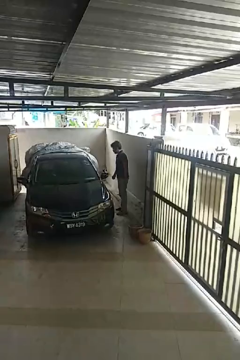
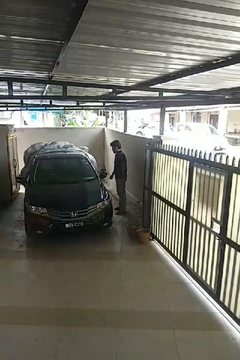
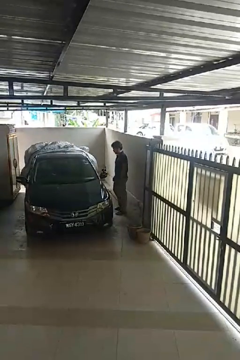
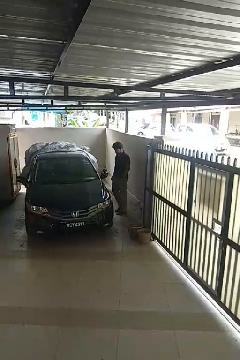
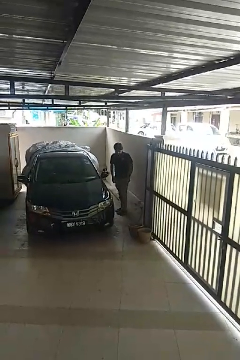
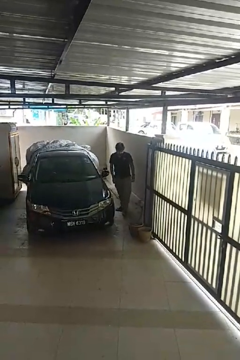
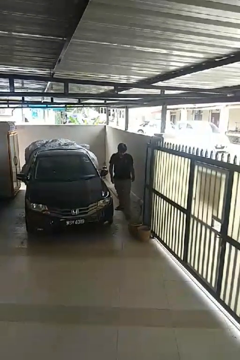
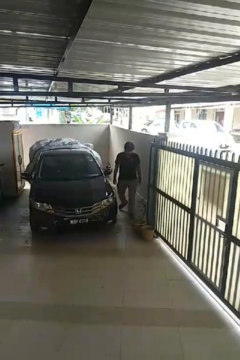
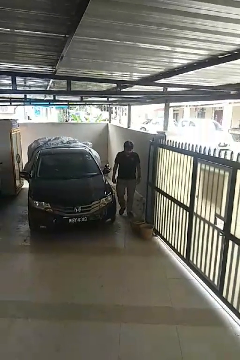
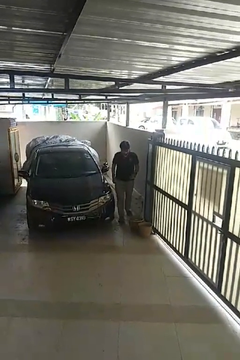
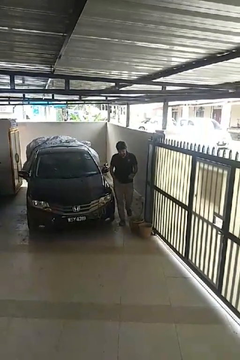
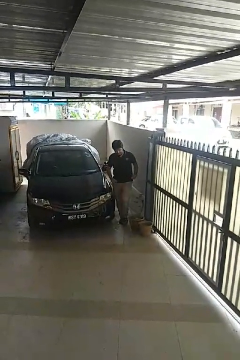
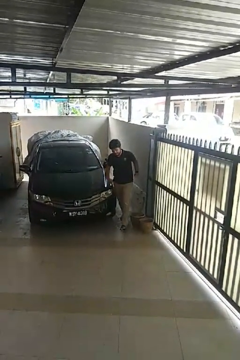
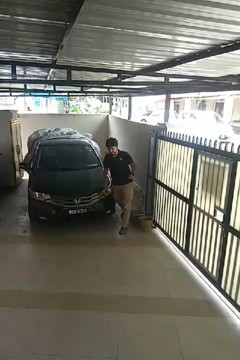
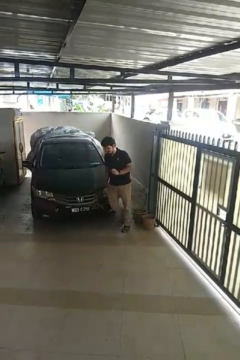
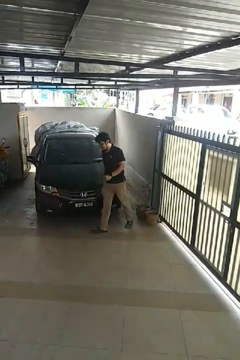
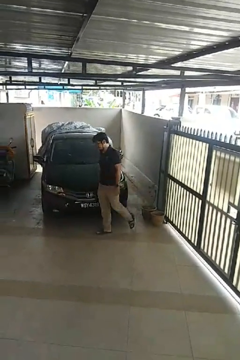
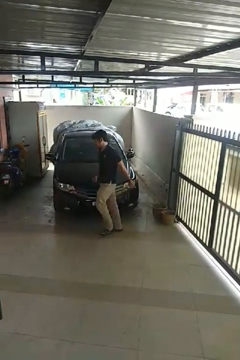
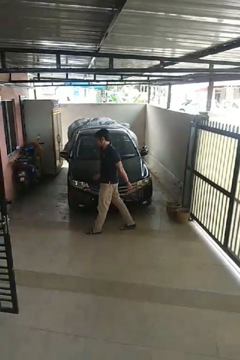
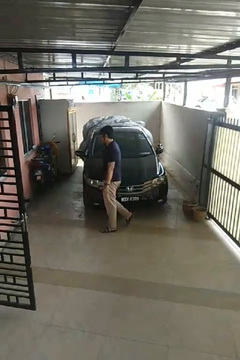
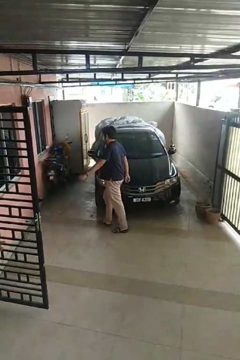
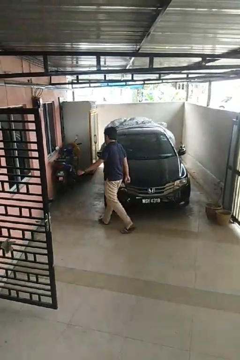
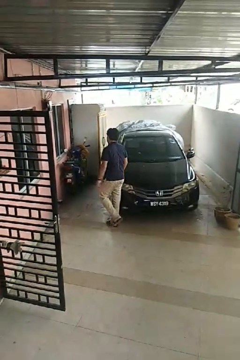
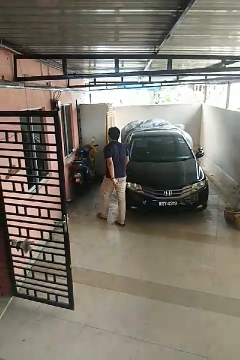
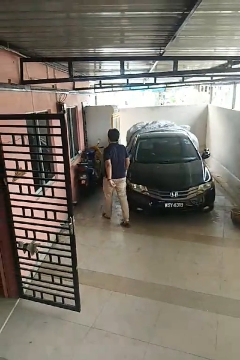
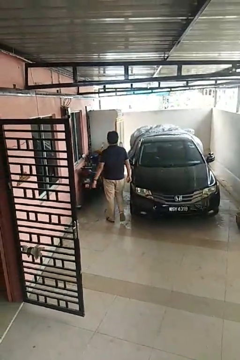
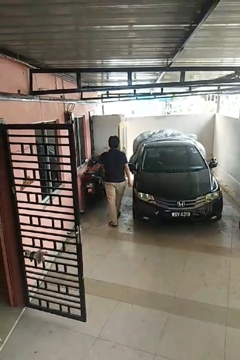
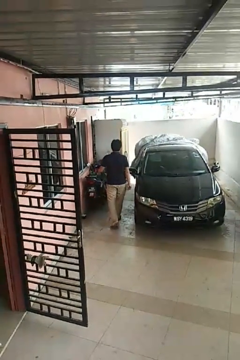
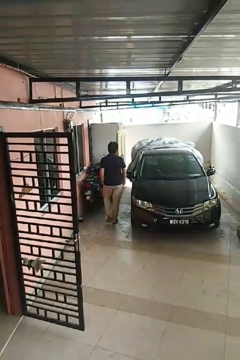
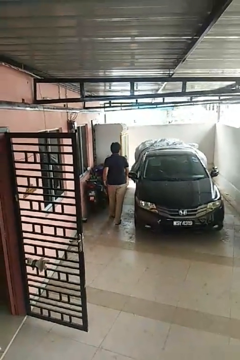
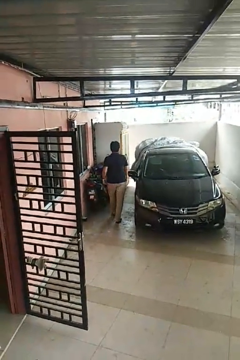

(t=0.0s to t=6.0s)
person walks around car

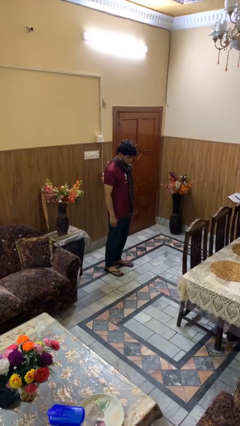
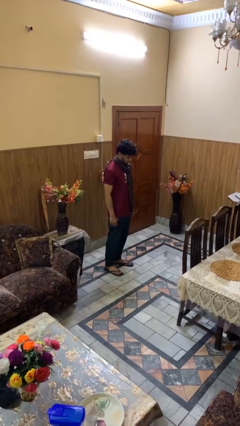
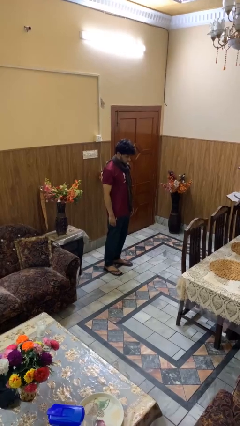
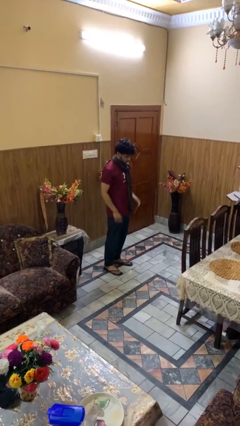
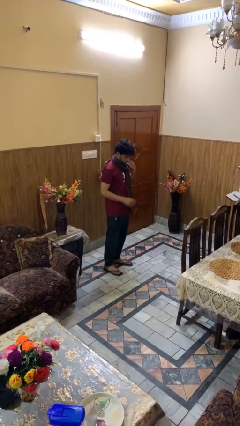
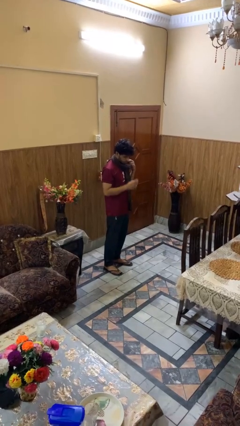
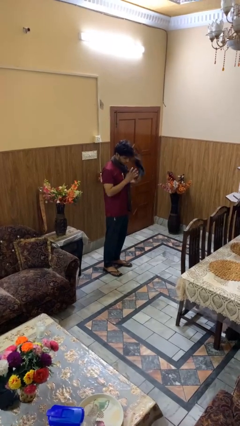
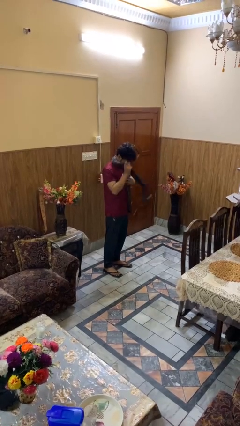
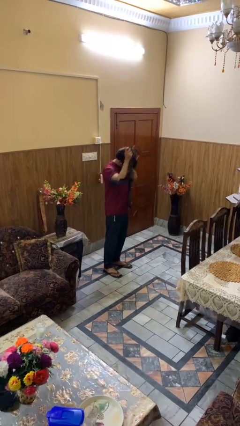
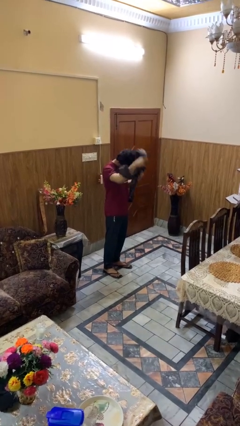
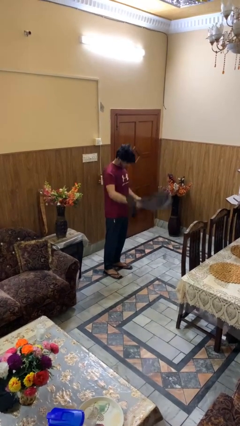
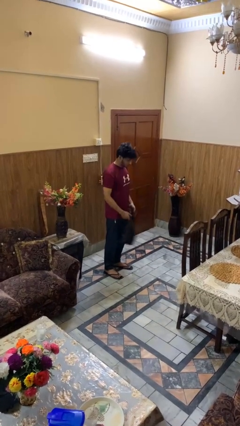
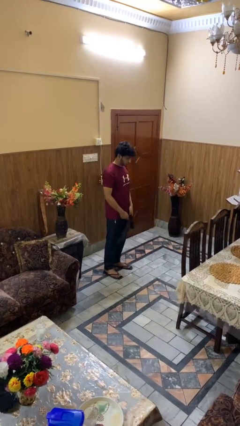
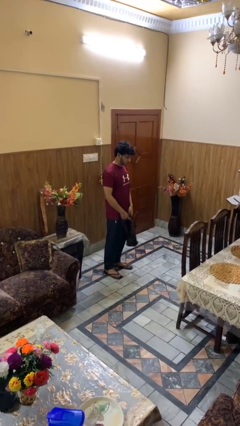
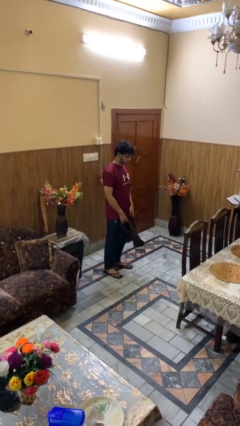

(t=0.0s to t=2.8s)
person takes off scarf

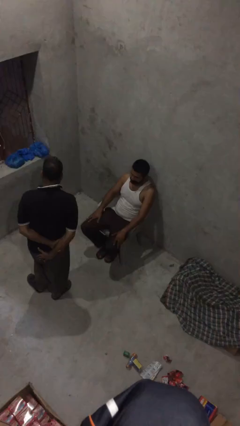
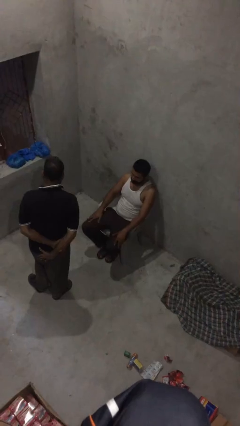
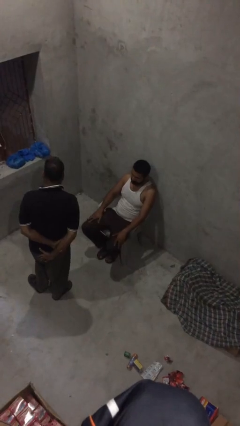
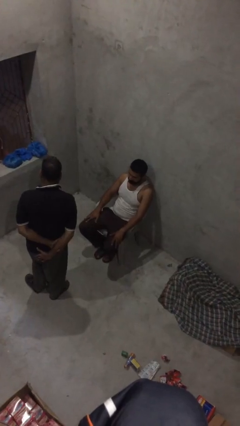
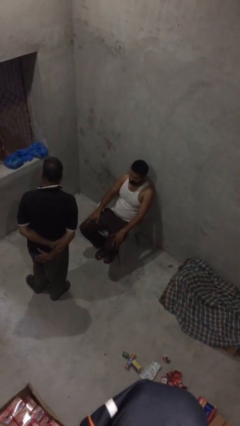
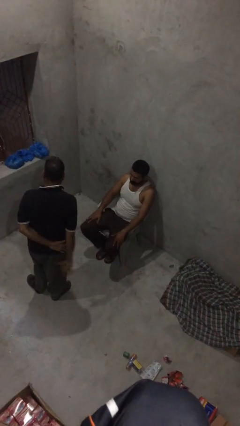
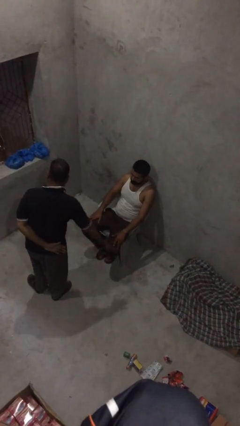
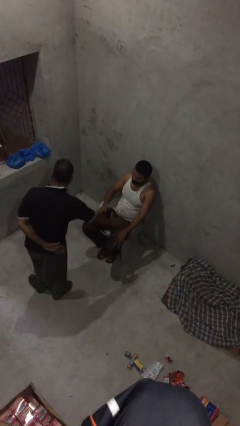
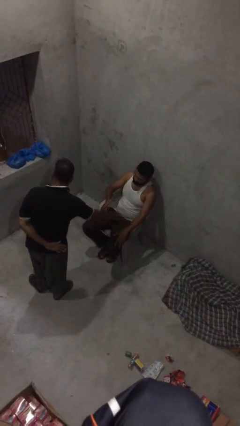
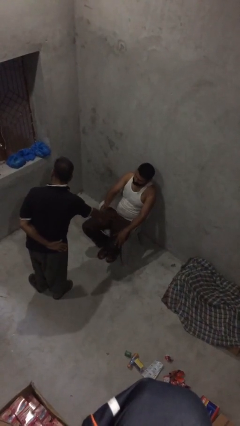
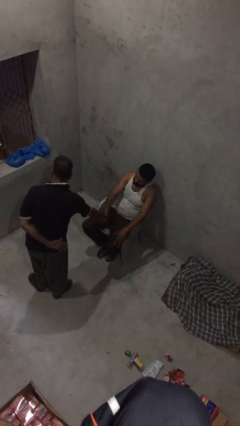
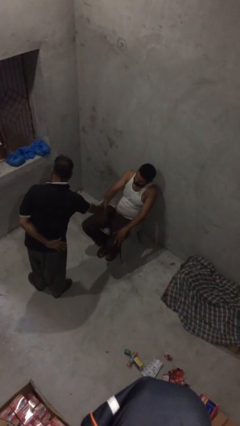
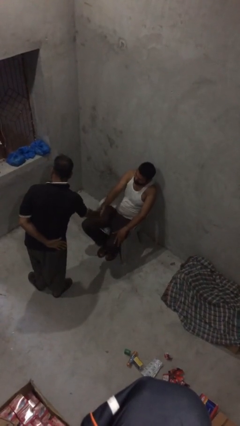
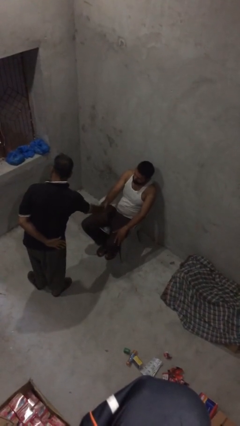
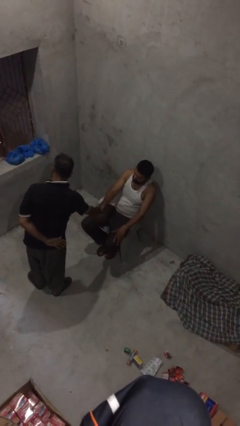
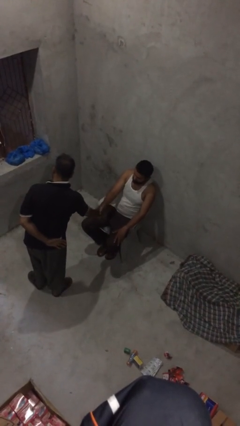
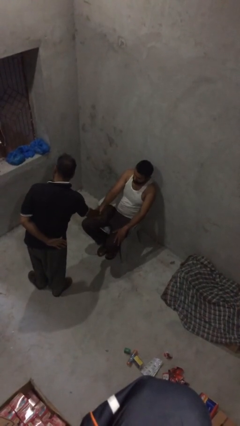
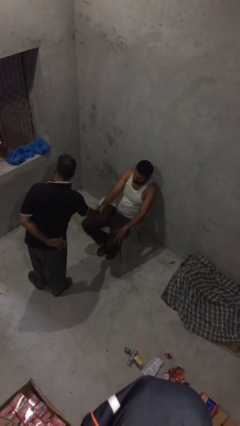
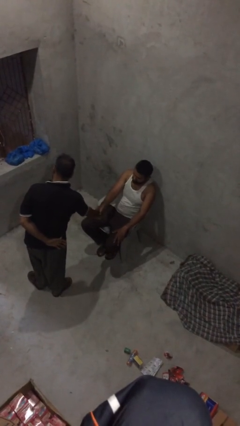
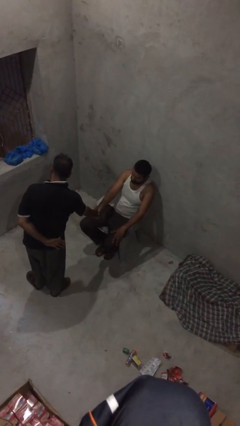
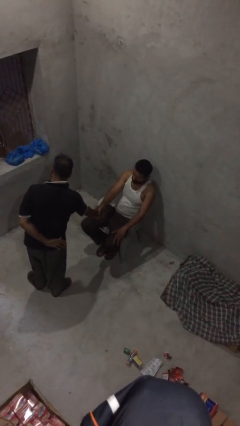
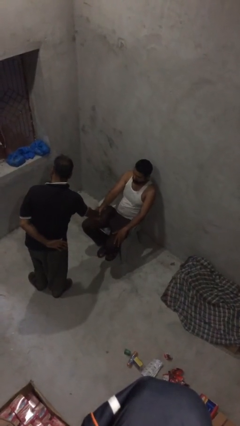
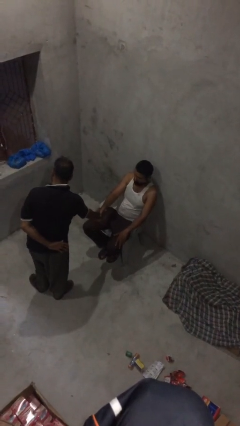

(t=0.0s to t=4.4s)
person shakes hand

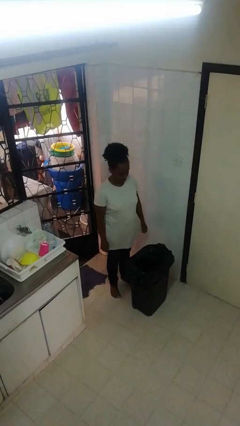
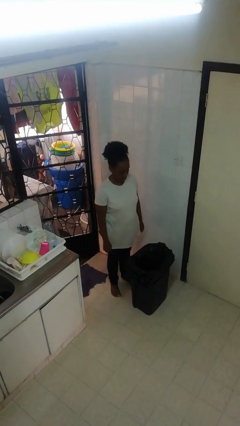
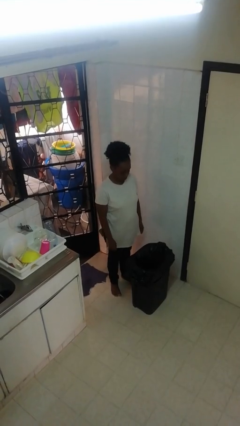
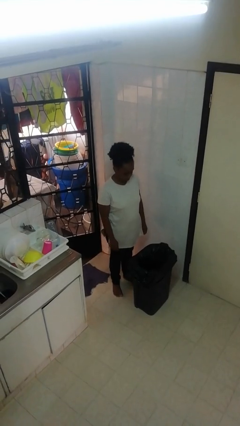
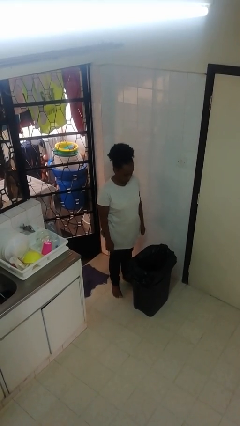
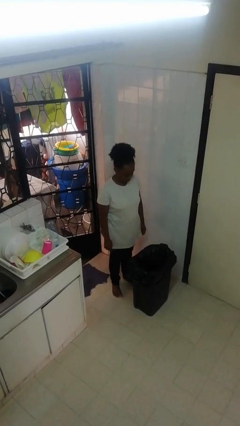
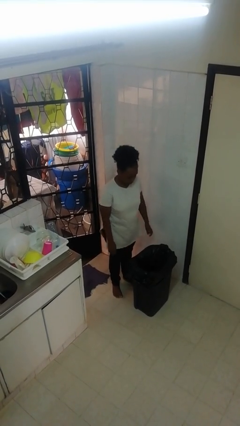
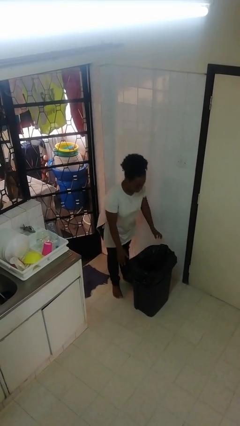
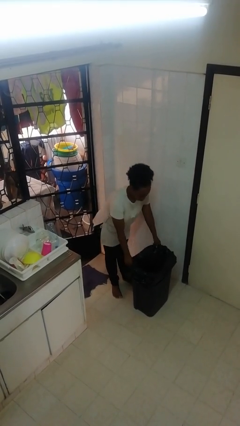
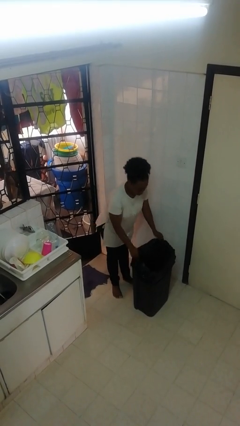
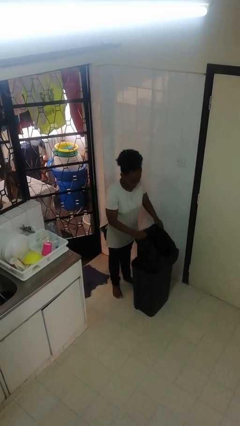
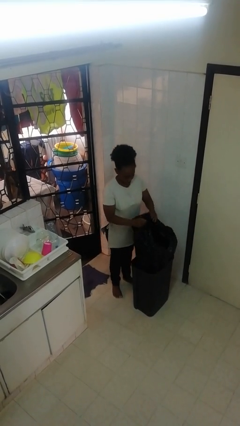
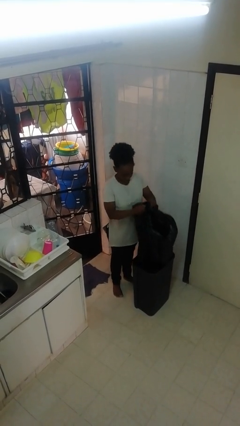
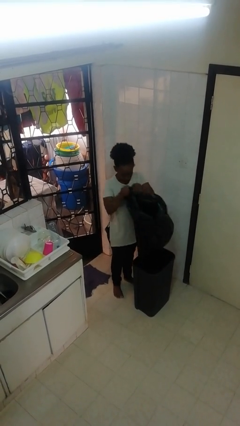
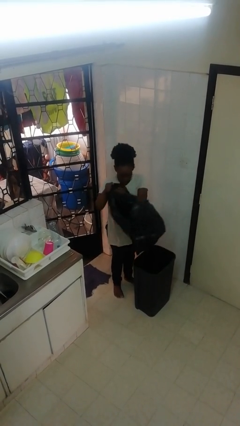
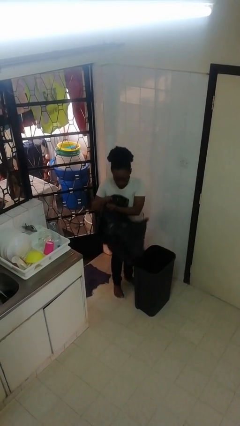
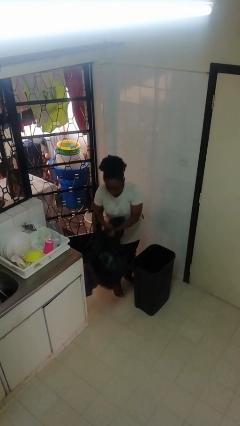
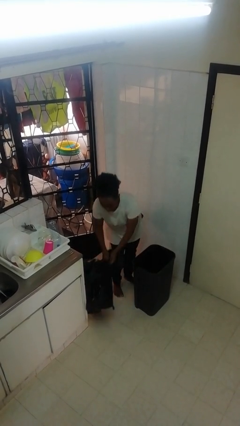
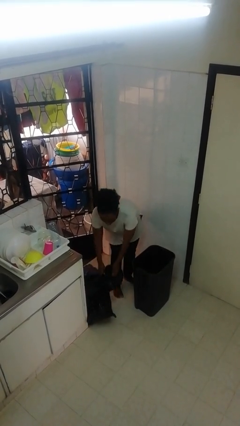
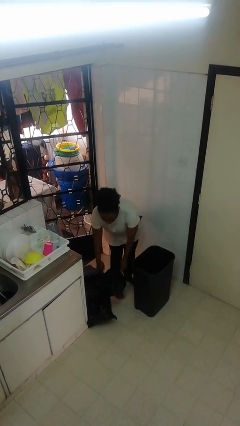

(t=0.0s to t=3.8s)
person removes trashbag from trashcan

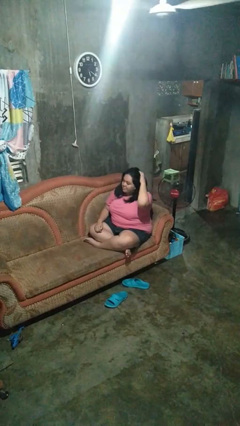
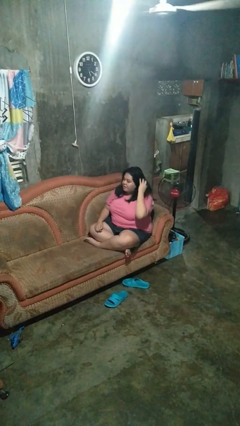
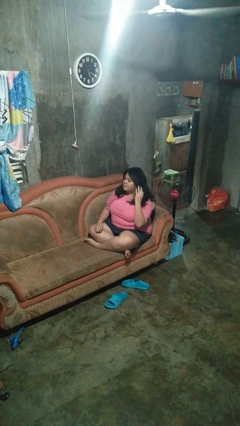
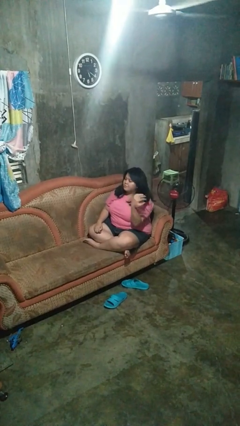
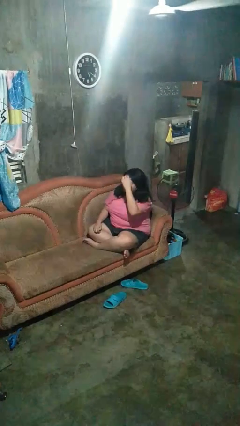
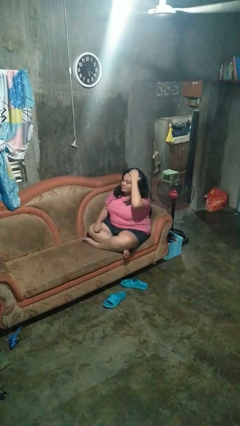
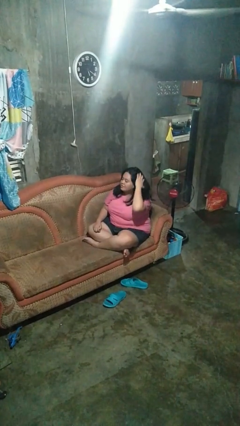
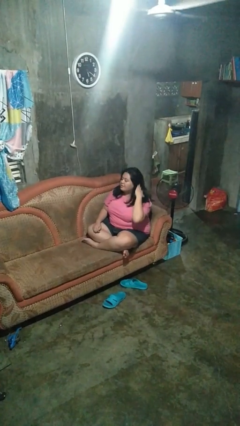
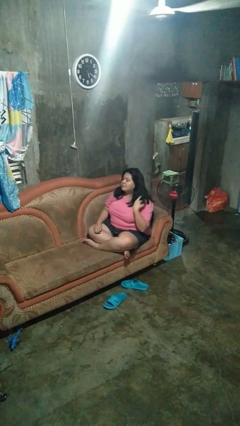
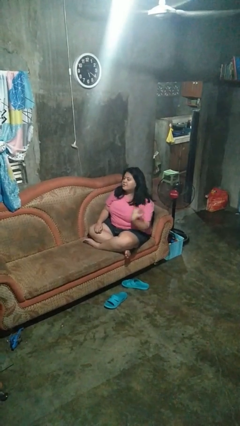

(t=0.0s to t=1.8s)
person strokes hair
